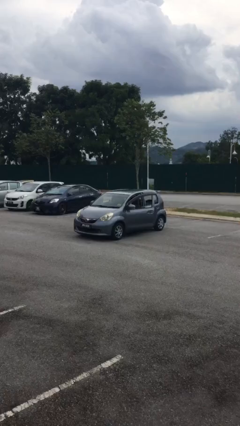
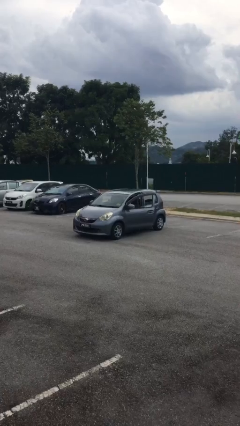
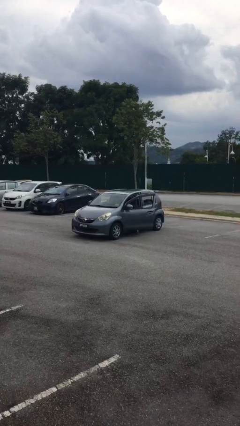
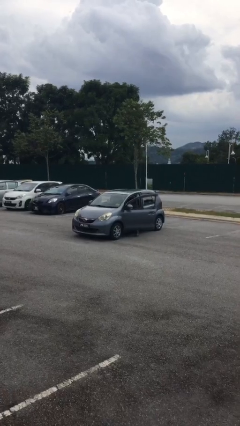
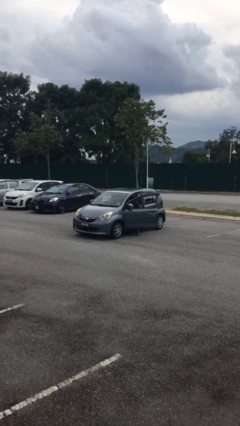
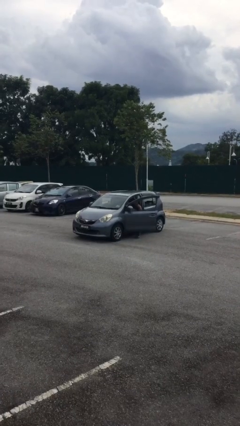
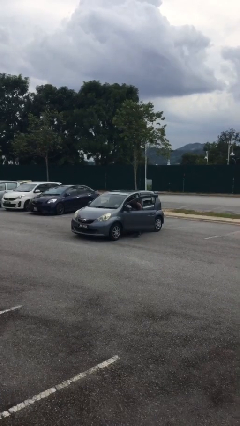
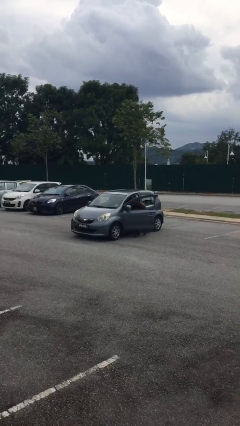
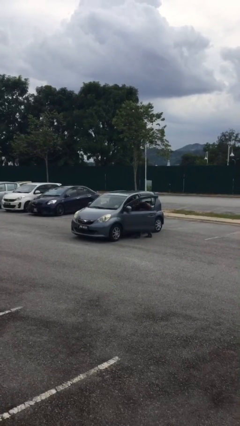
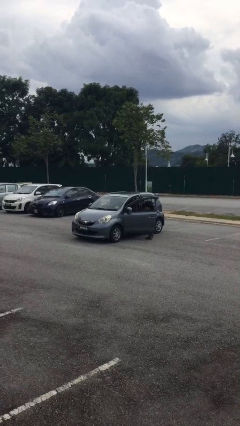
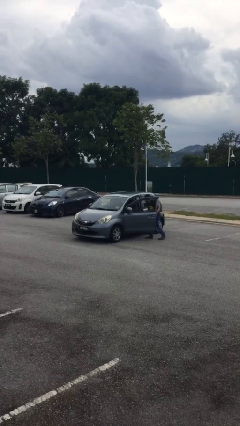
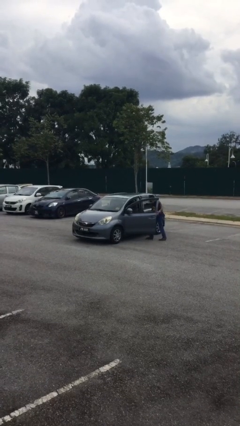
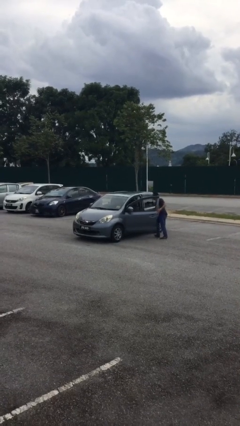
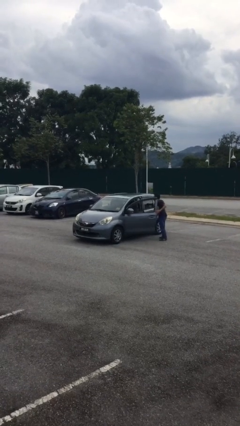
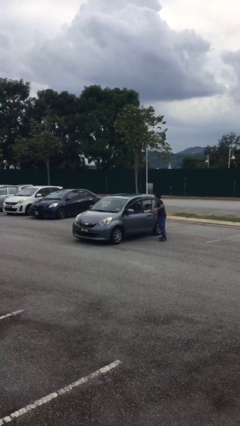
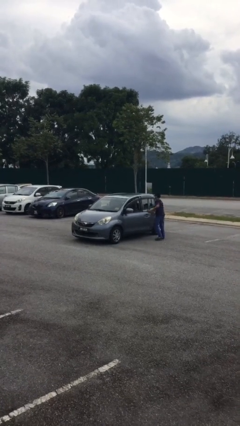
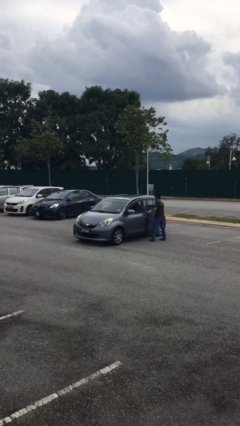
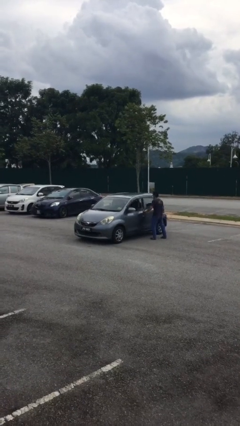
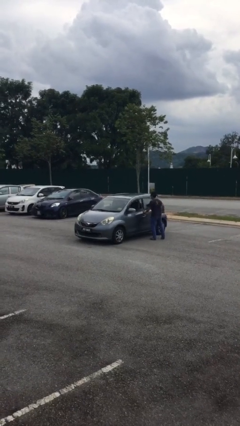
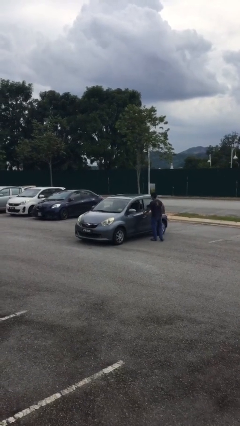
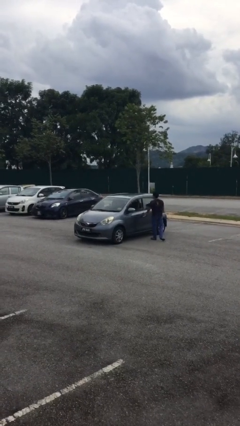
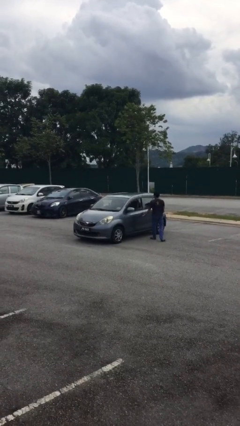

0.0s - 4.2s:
car drops off person

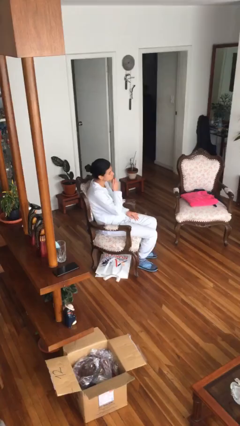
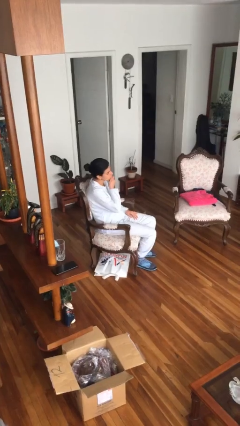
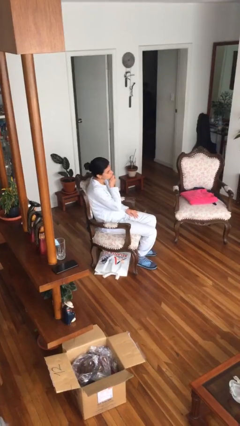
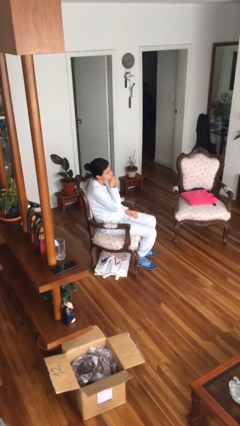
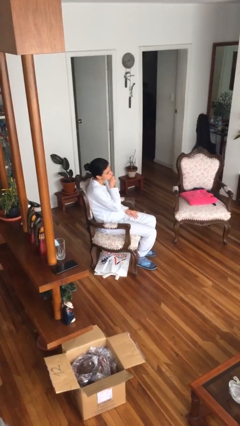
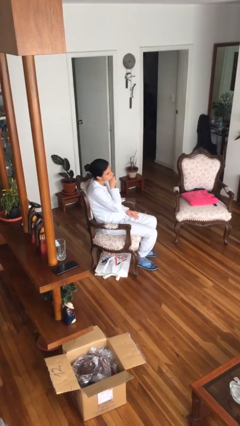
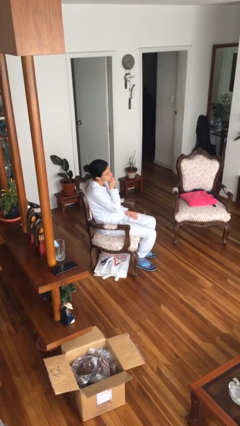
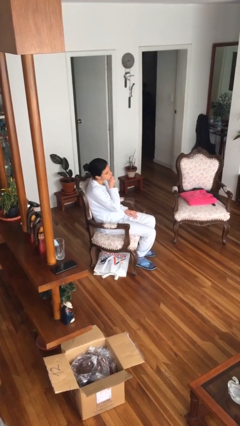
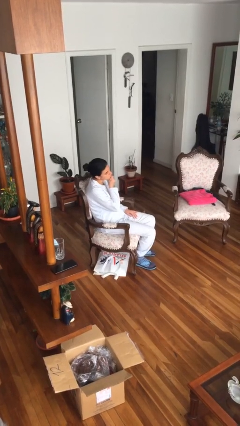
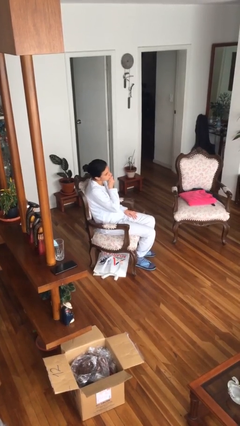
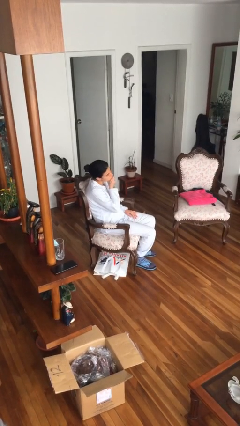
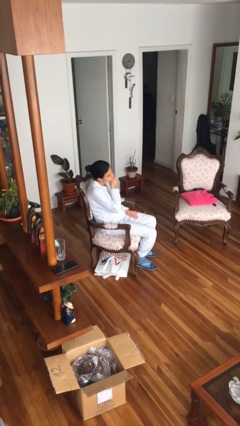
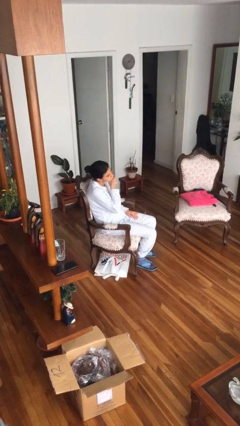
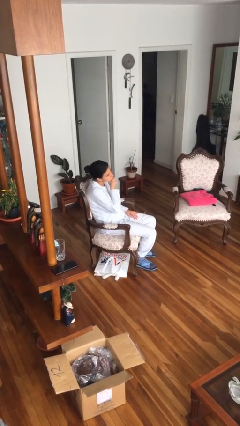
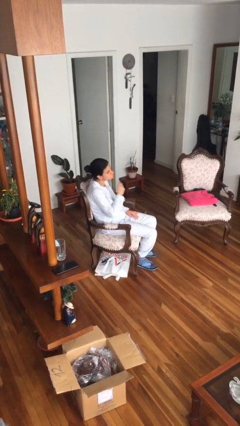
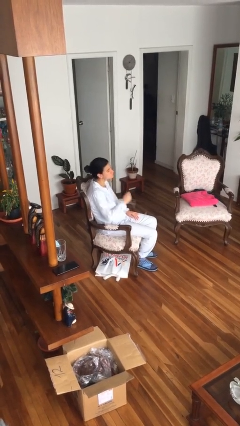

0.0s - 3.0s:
person strokes chin

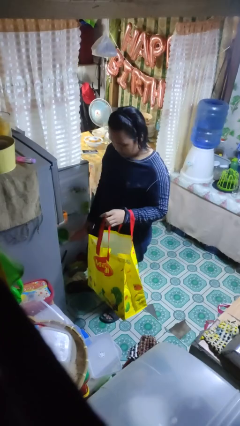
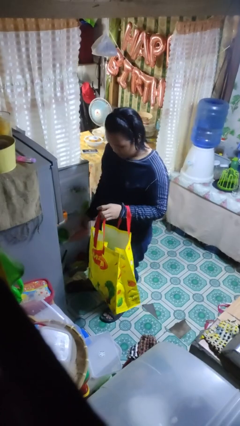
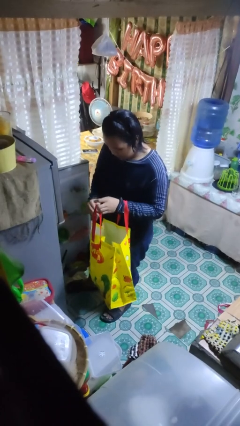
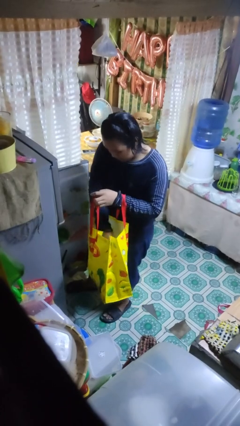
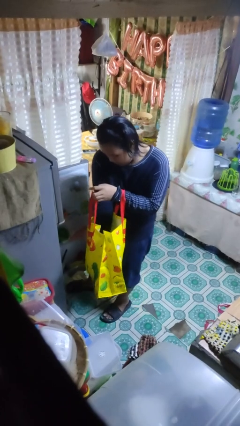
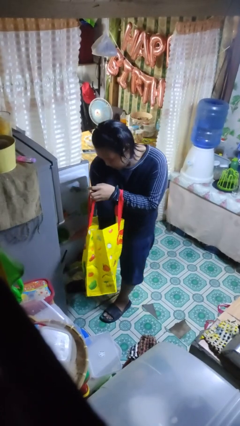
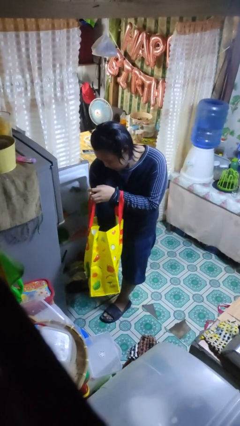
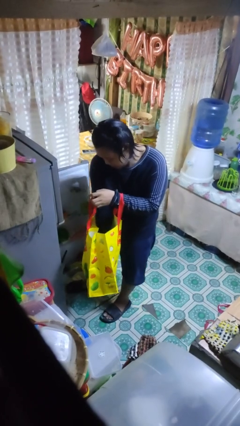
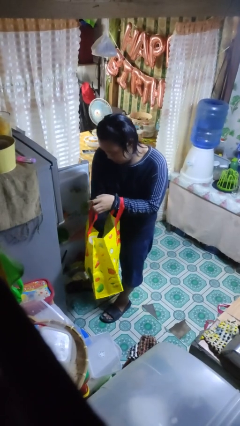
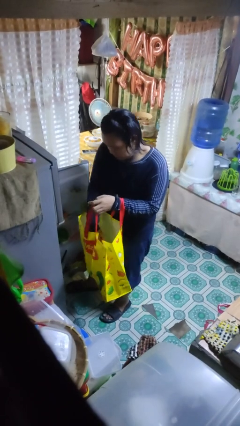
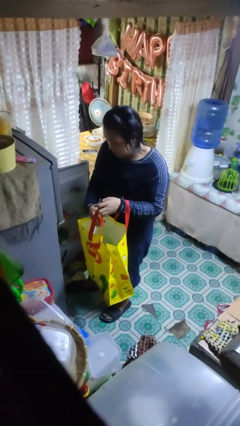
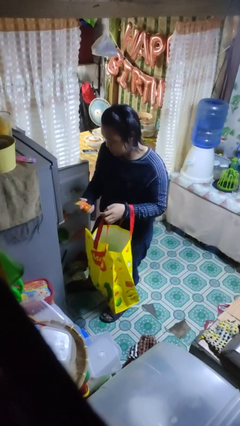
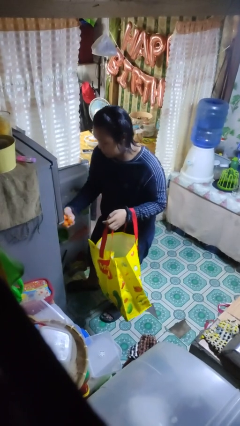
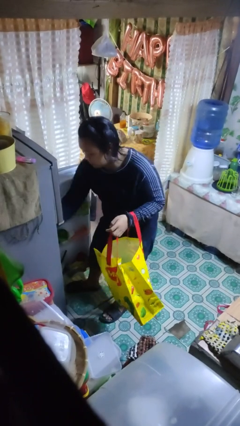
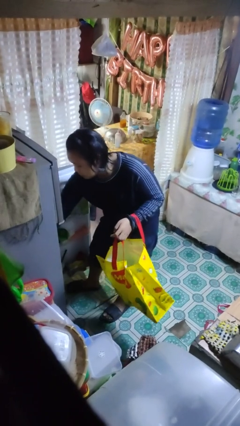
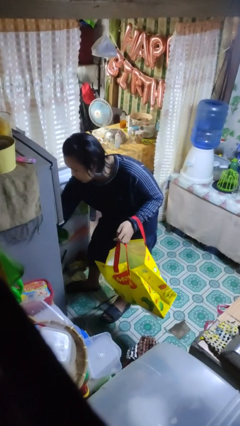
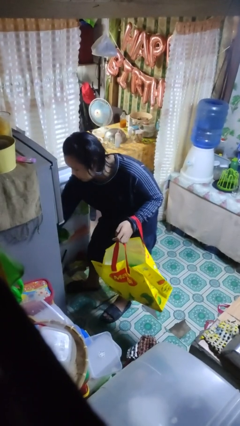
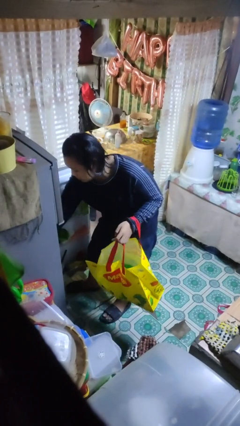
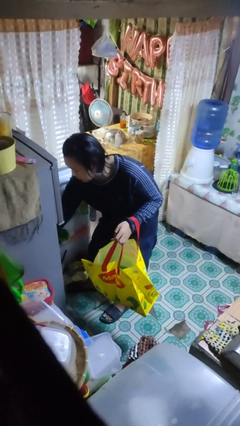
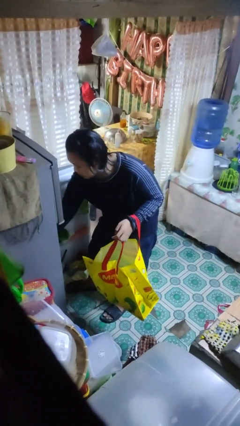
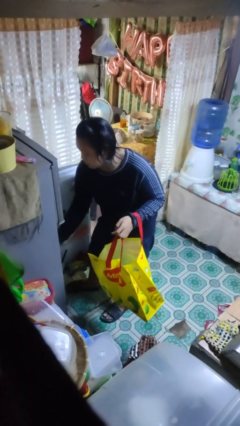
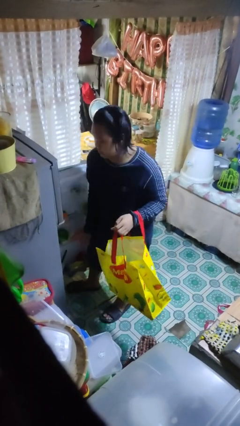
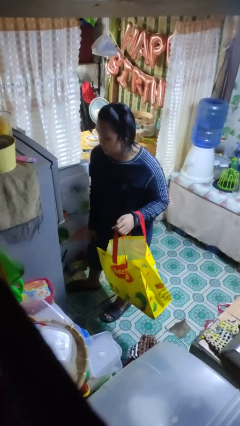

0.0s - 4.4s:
person loads groceries into refrigerator

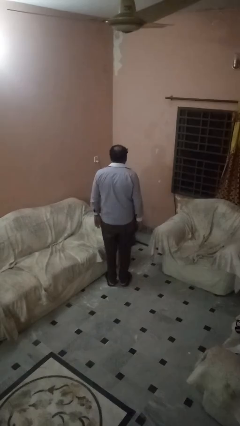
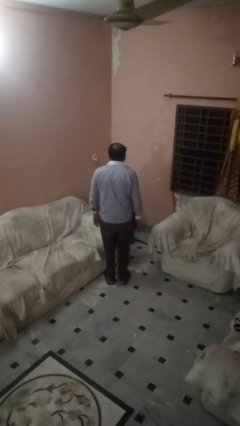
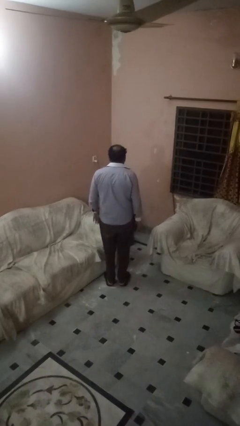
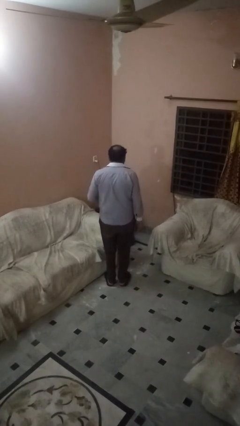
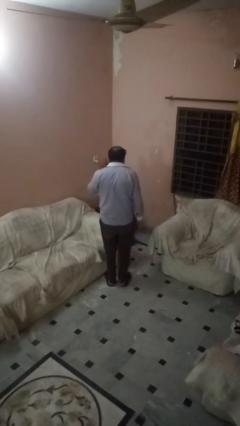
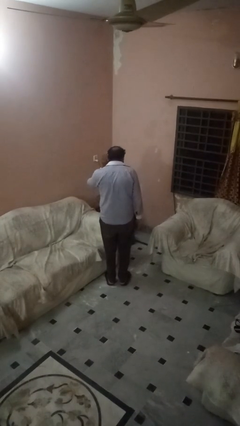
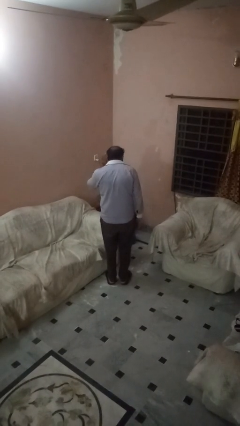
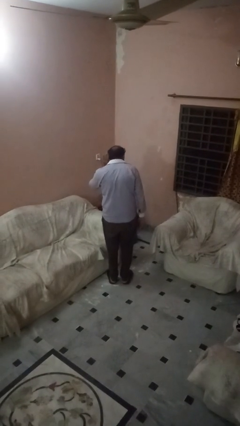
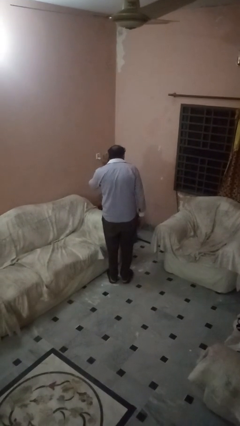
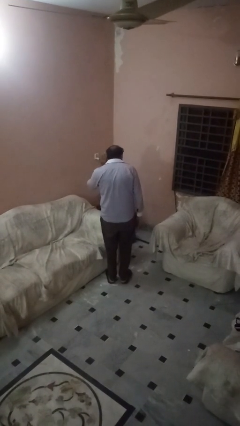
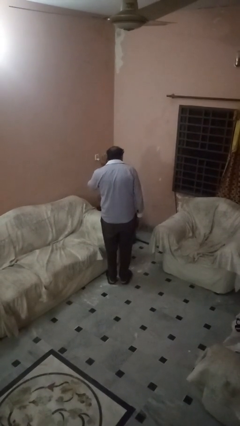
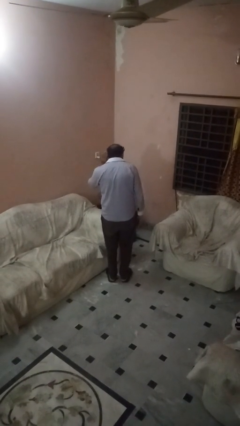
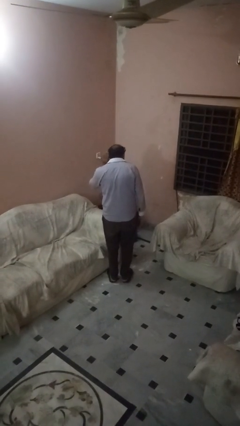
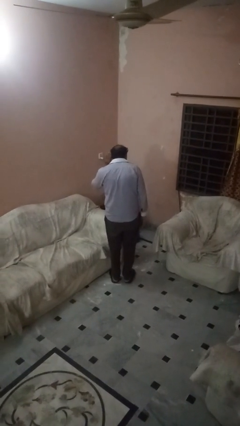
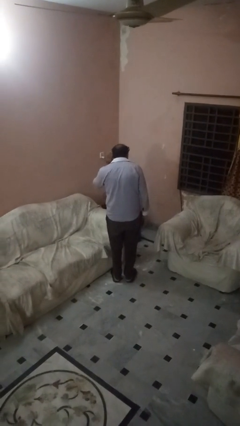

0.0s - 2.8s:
person gestures listen closely

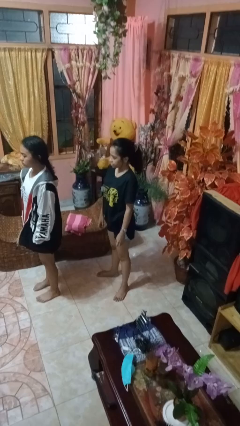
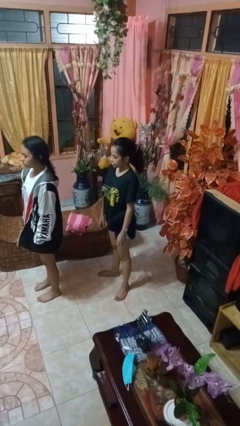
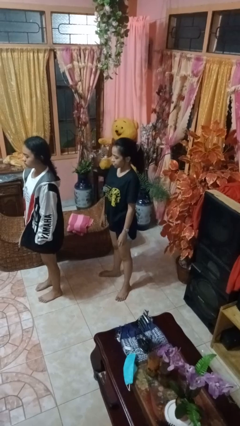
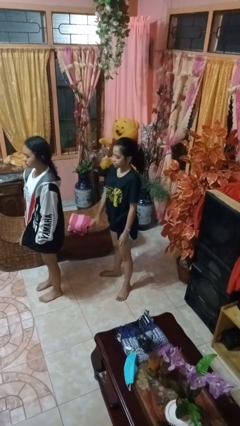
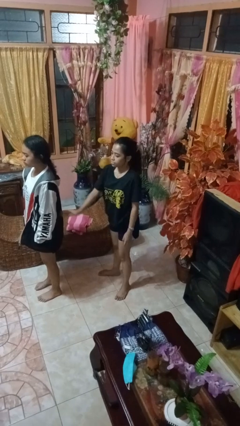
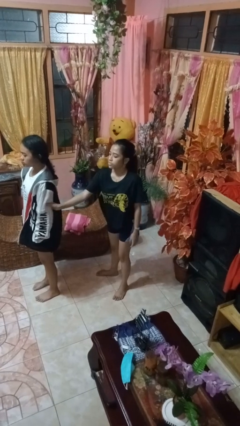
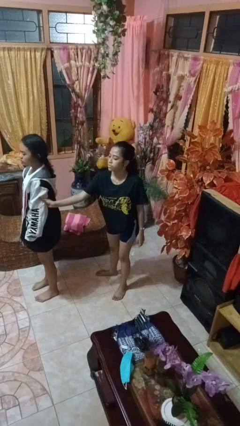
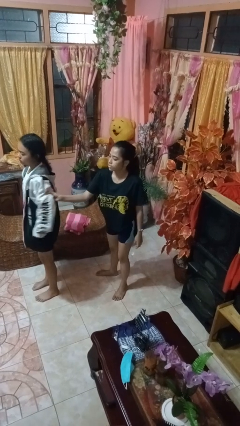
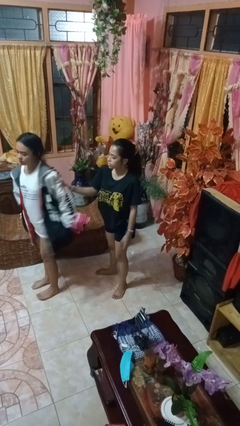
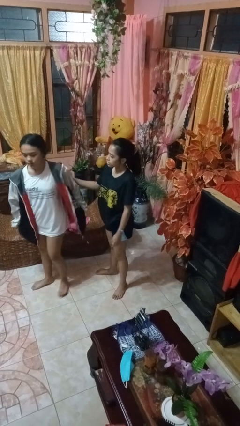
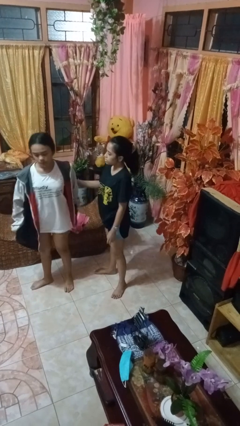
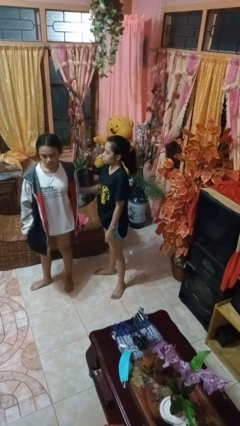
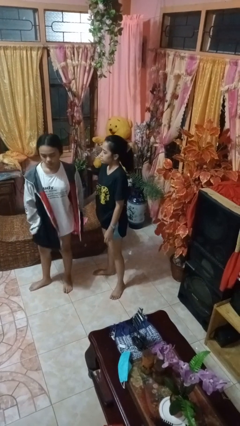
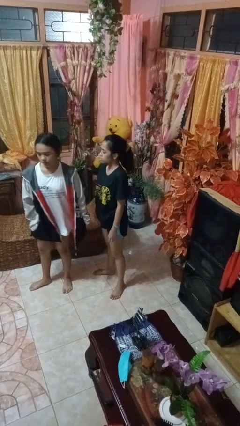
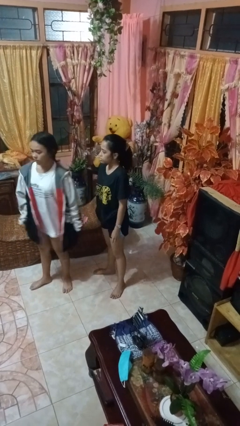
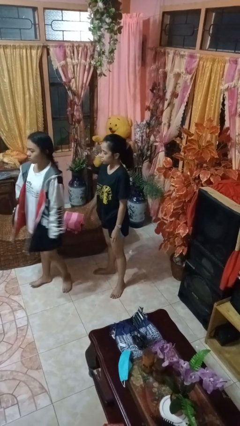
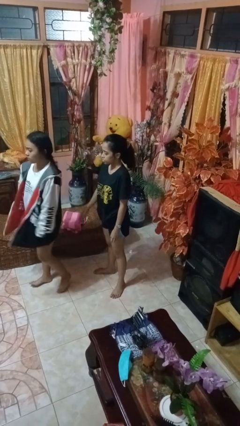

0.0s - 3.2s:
person grabs person by bicep
